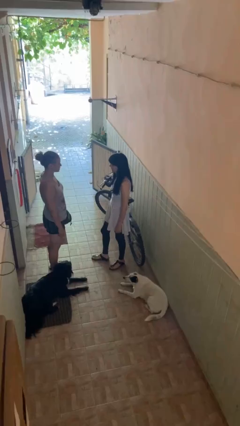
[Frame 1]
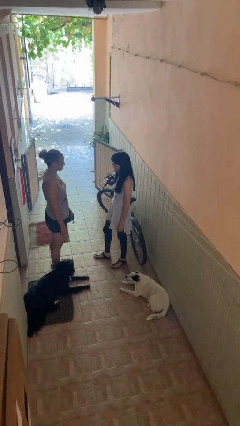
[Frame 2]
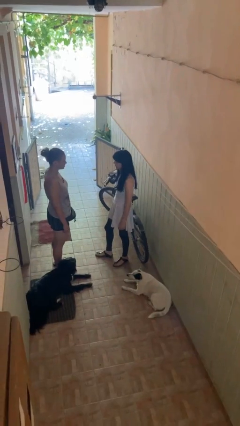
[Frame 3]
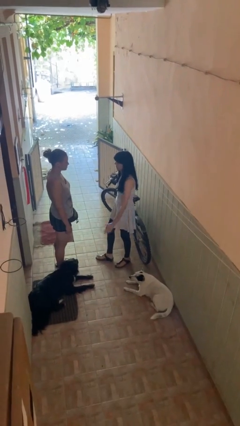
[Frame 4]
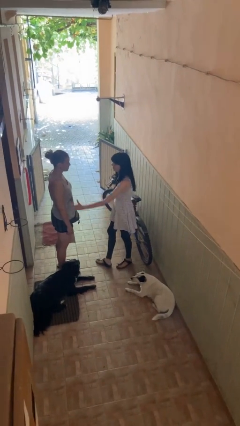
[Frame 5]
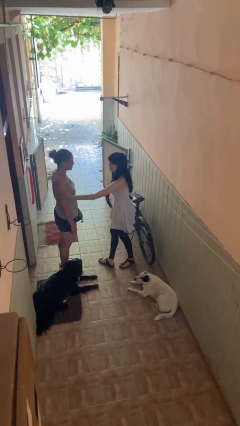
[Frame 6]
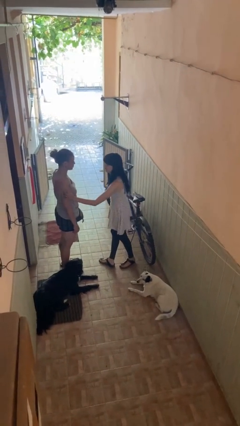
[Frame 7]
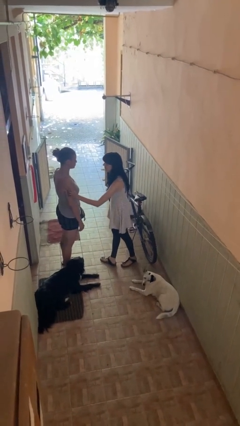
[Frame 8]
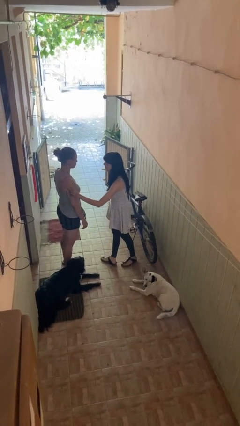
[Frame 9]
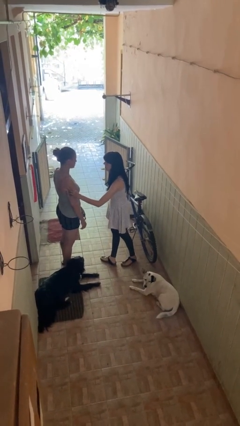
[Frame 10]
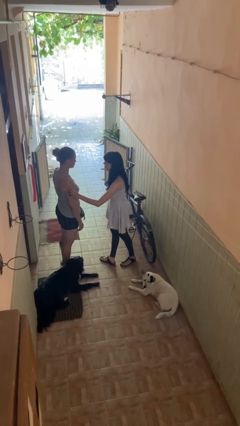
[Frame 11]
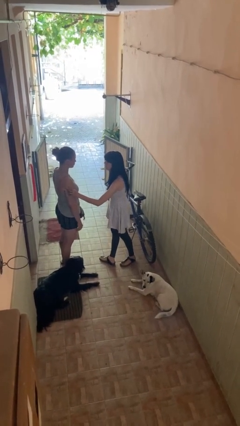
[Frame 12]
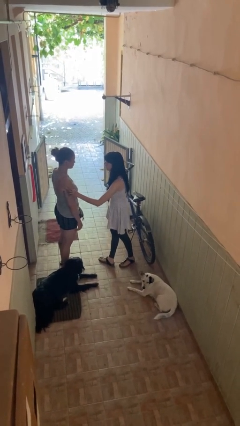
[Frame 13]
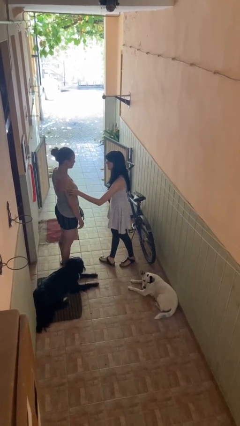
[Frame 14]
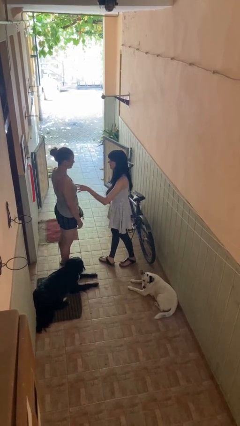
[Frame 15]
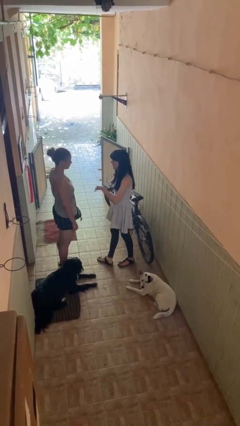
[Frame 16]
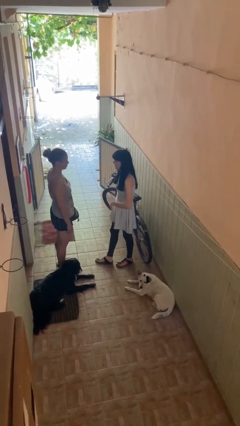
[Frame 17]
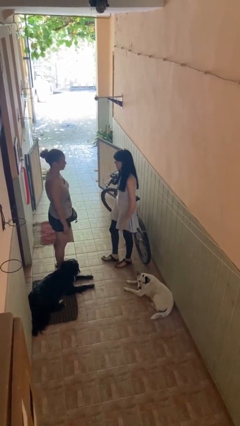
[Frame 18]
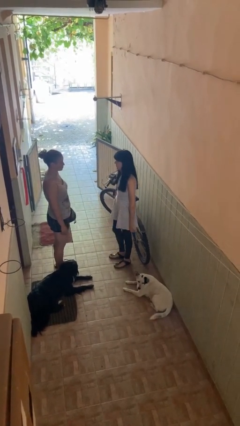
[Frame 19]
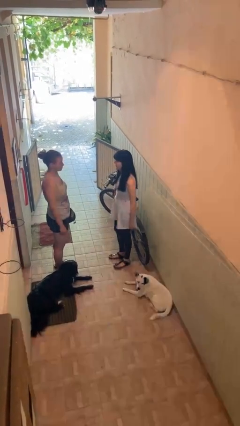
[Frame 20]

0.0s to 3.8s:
person grabs person by bicep

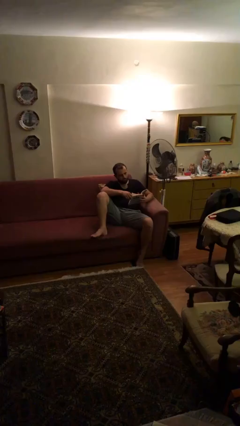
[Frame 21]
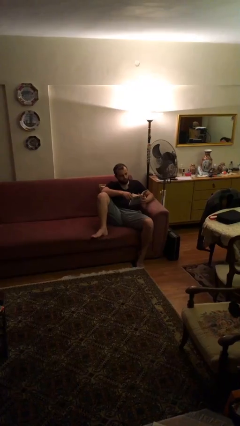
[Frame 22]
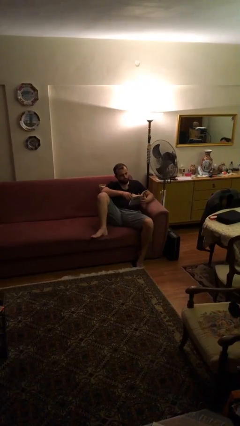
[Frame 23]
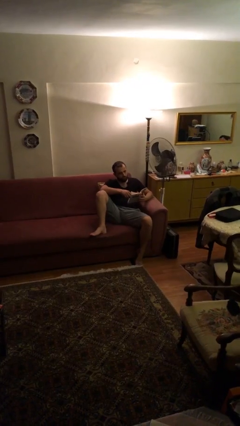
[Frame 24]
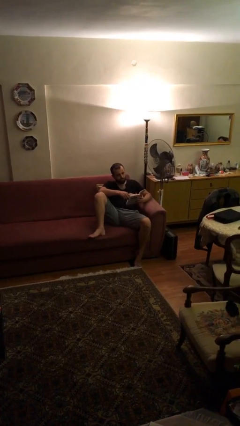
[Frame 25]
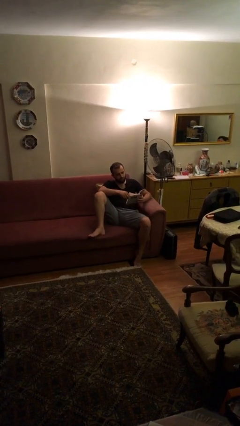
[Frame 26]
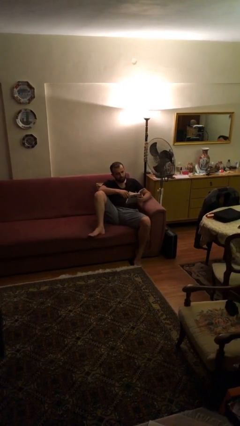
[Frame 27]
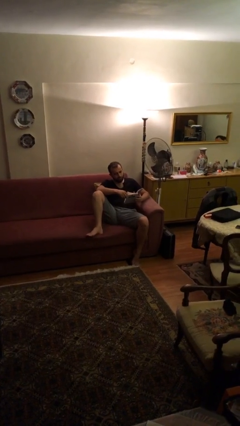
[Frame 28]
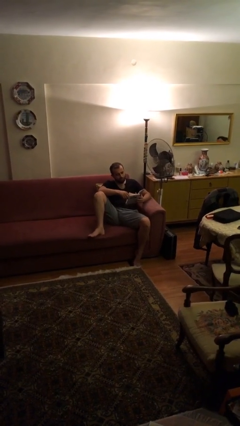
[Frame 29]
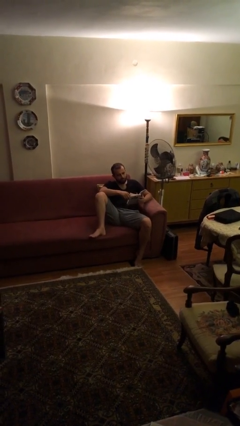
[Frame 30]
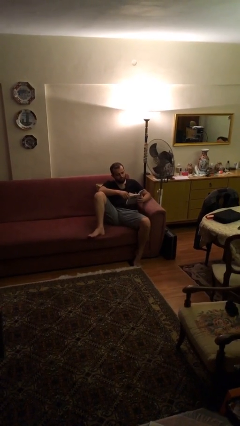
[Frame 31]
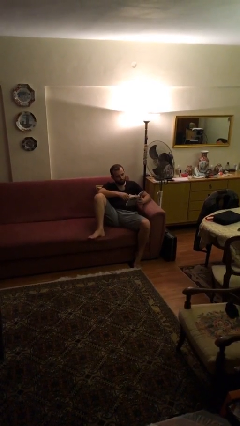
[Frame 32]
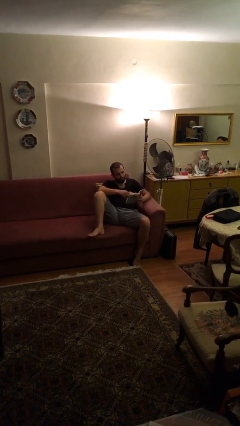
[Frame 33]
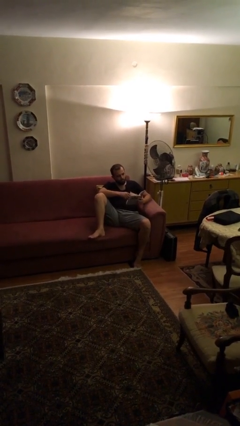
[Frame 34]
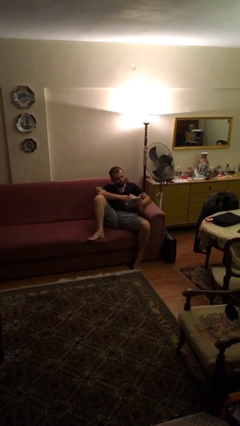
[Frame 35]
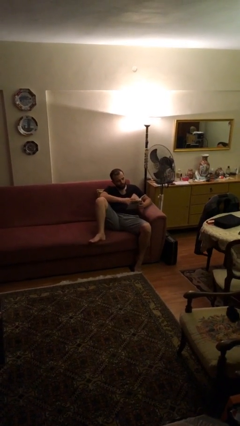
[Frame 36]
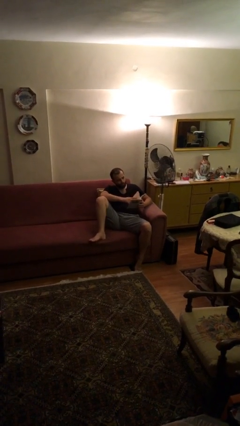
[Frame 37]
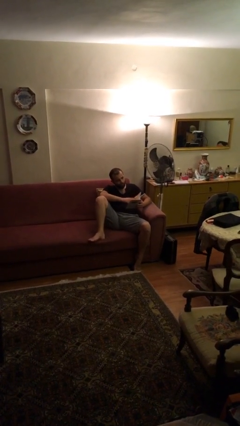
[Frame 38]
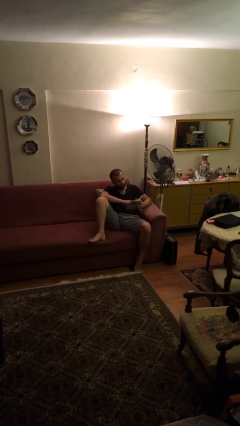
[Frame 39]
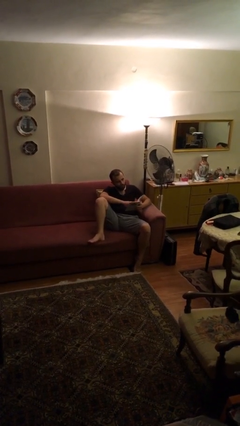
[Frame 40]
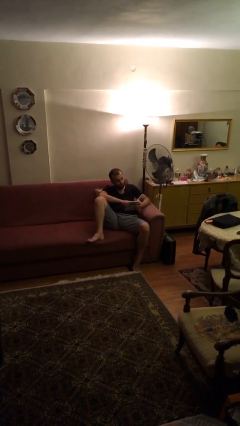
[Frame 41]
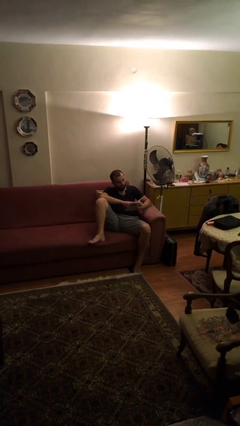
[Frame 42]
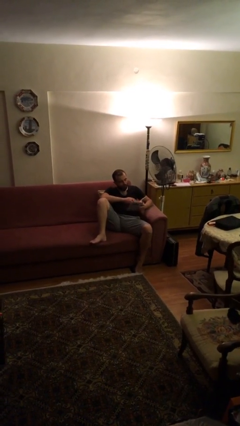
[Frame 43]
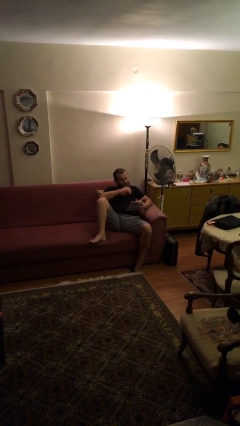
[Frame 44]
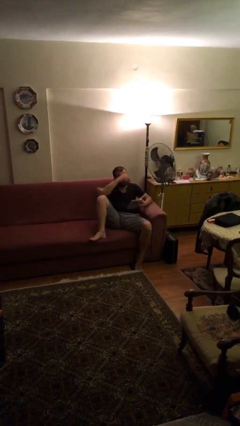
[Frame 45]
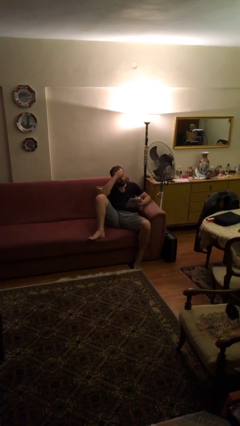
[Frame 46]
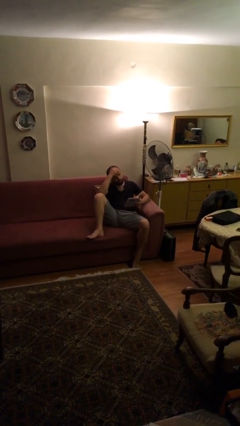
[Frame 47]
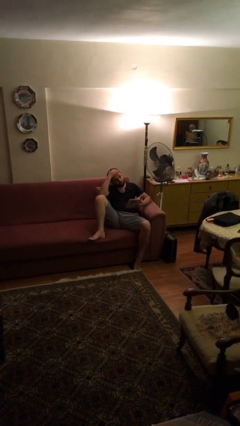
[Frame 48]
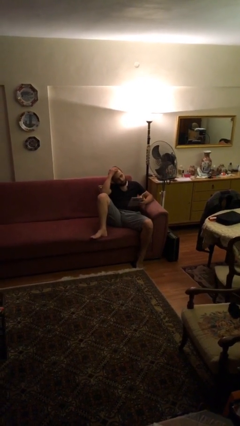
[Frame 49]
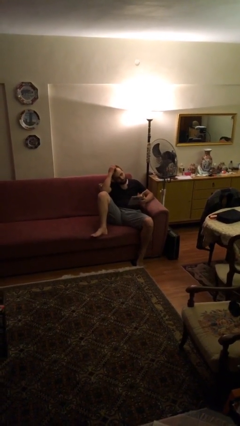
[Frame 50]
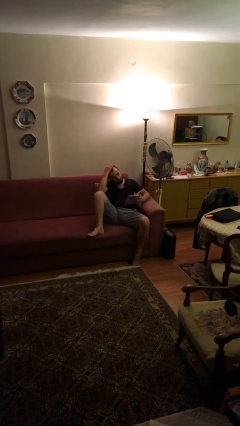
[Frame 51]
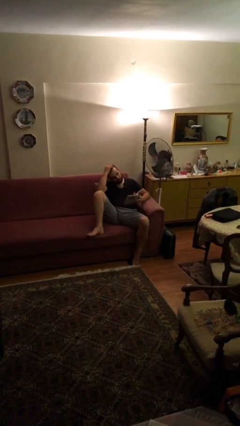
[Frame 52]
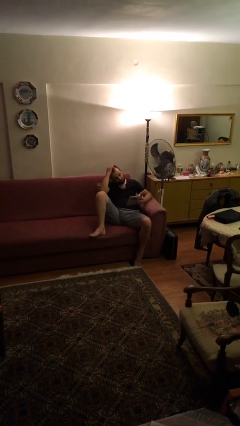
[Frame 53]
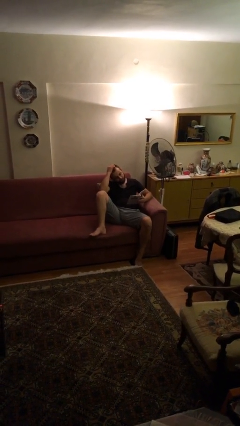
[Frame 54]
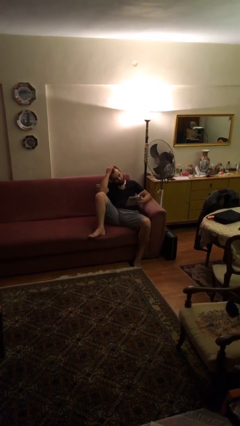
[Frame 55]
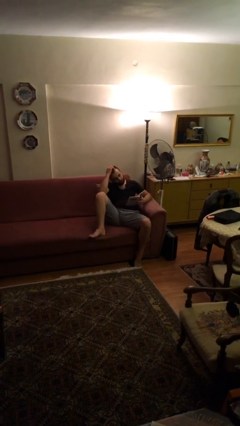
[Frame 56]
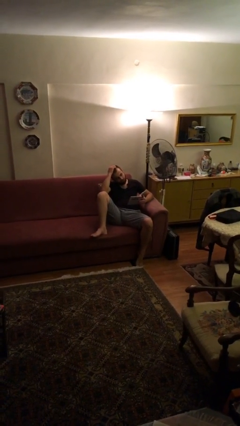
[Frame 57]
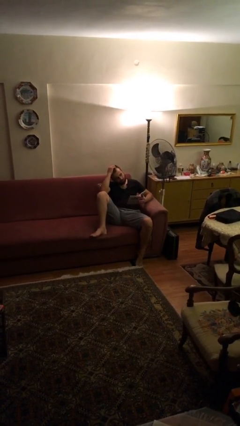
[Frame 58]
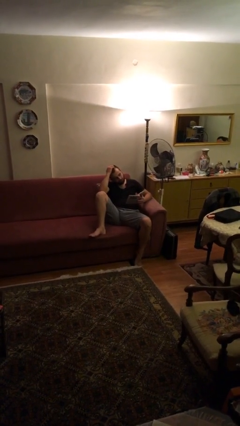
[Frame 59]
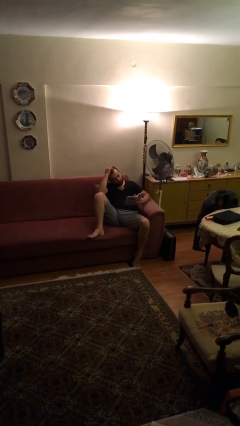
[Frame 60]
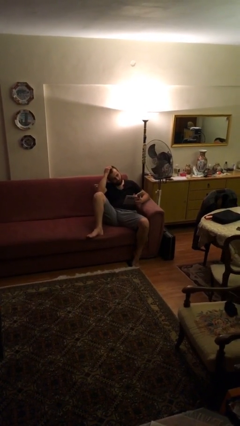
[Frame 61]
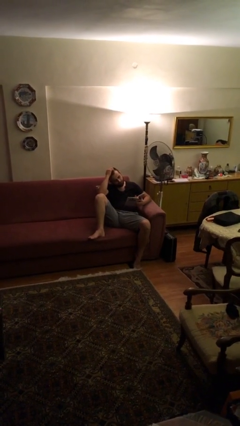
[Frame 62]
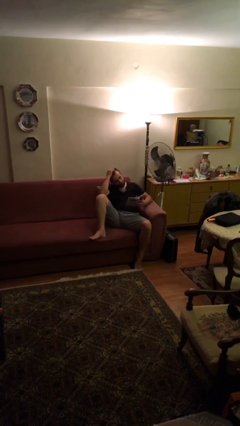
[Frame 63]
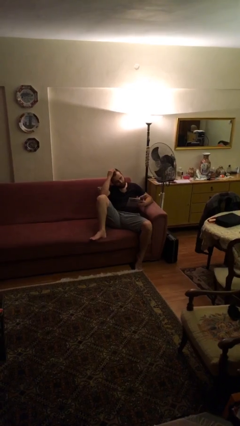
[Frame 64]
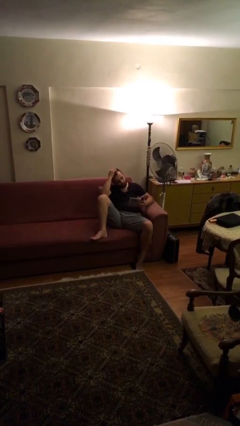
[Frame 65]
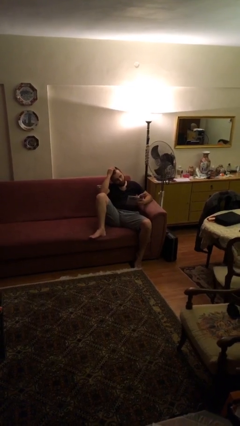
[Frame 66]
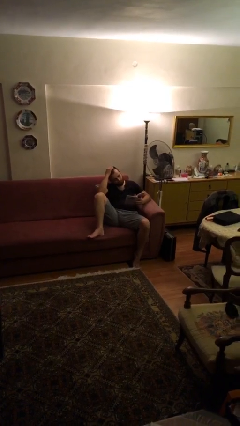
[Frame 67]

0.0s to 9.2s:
person reads document

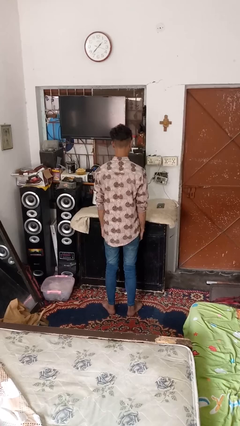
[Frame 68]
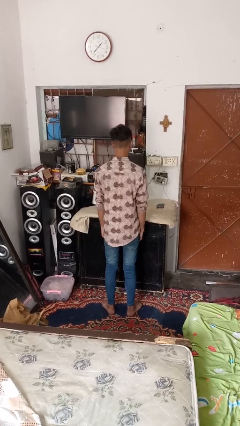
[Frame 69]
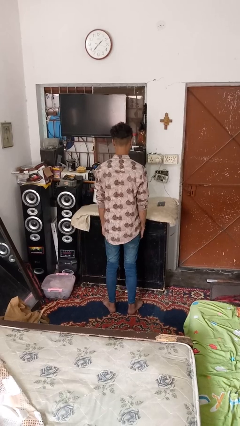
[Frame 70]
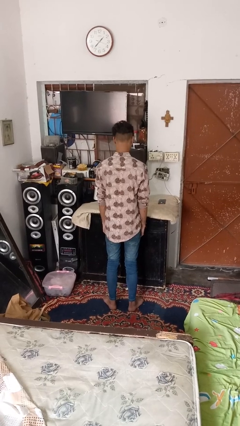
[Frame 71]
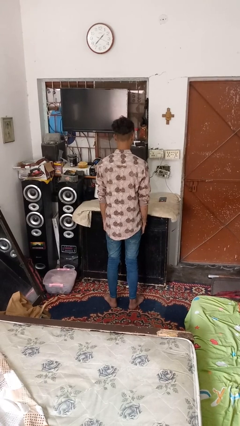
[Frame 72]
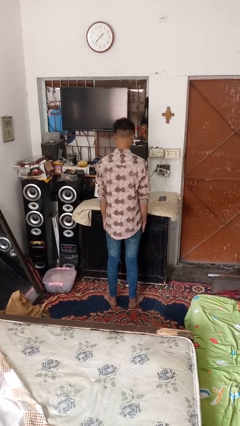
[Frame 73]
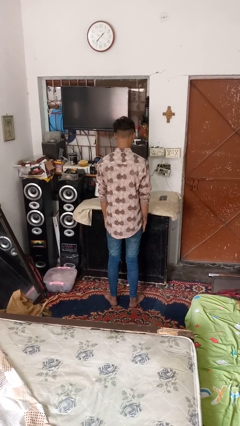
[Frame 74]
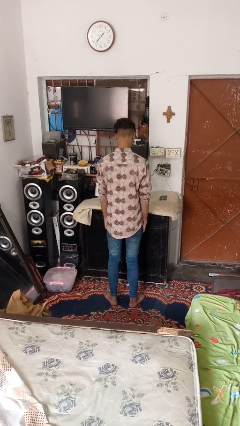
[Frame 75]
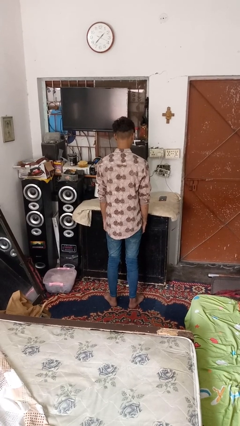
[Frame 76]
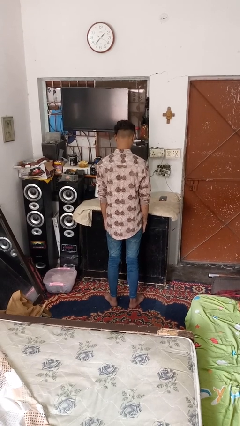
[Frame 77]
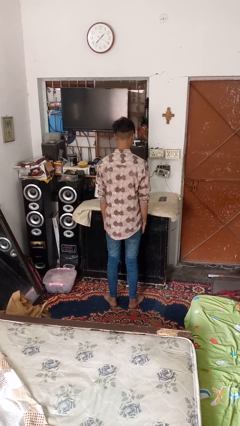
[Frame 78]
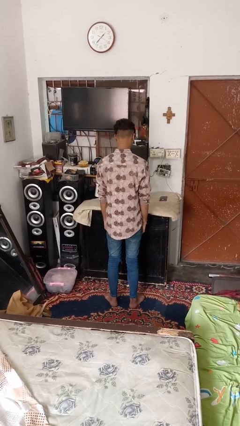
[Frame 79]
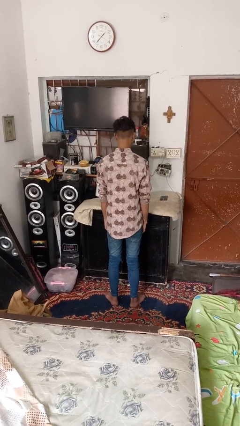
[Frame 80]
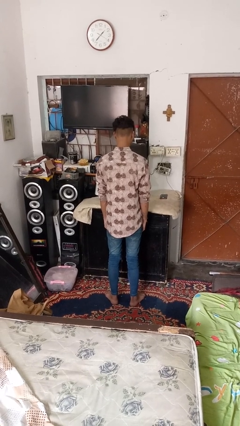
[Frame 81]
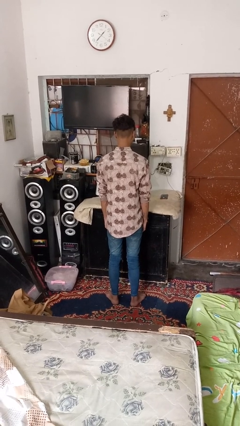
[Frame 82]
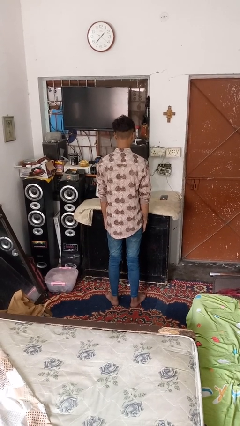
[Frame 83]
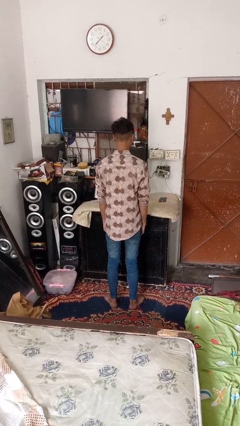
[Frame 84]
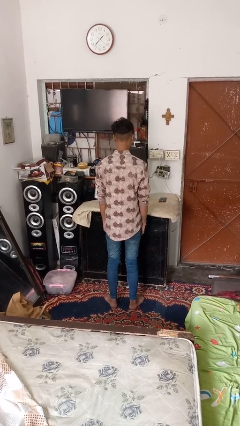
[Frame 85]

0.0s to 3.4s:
person nods head

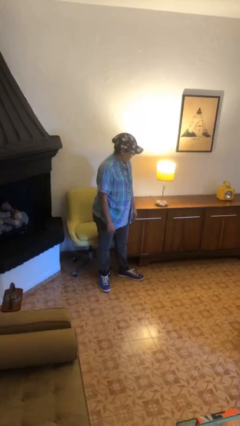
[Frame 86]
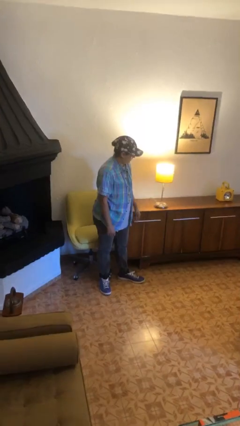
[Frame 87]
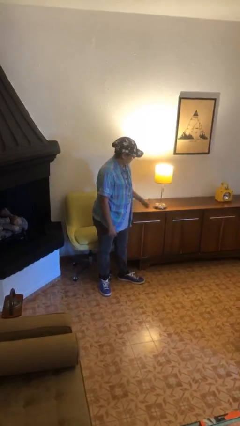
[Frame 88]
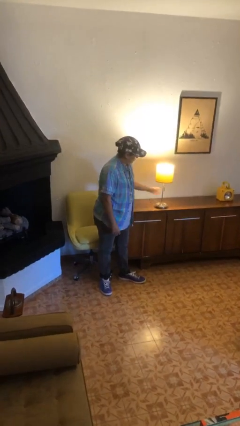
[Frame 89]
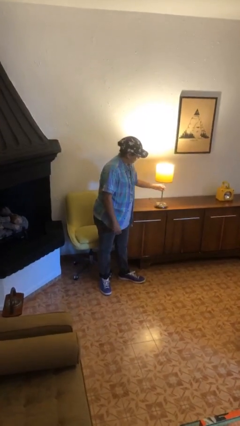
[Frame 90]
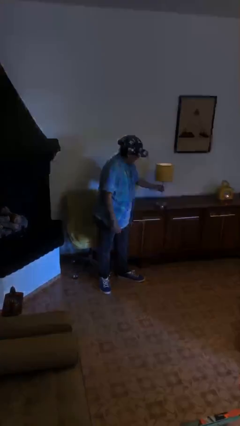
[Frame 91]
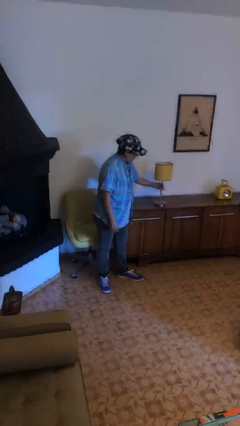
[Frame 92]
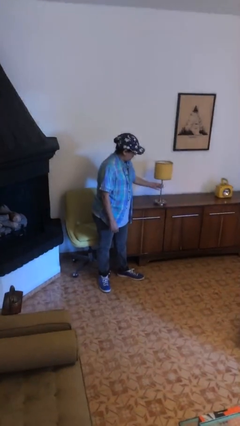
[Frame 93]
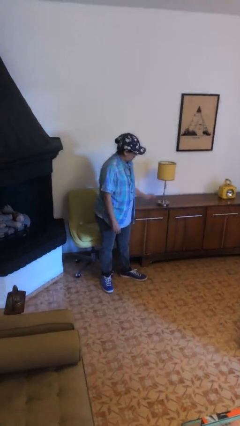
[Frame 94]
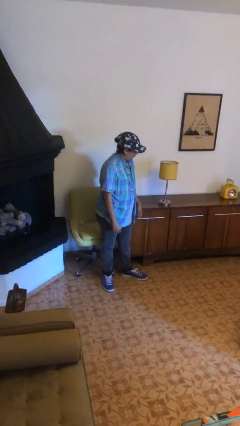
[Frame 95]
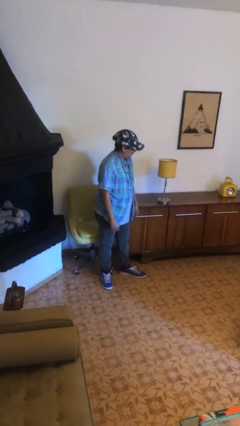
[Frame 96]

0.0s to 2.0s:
person turns off lamp
